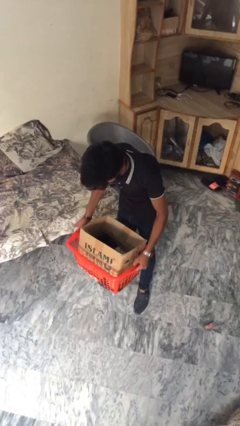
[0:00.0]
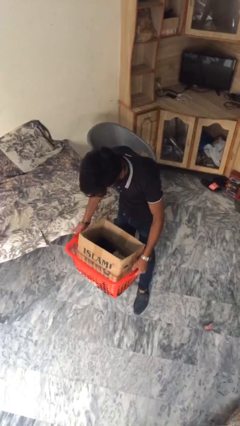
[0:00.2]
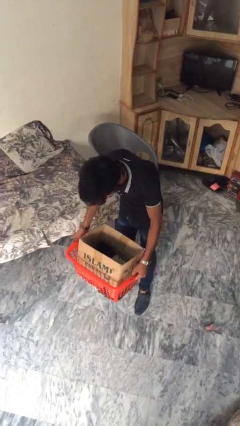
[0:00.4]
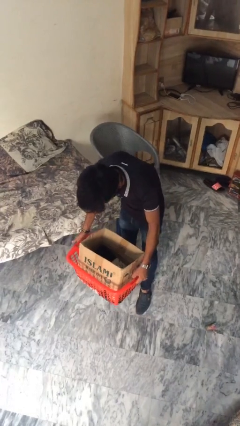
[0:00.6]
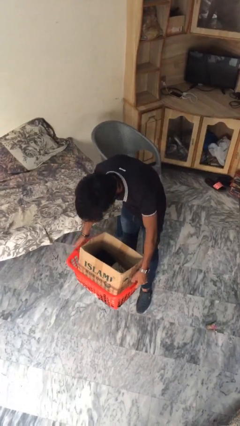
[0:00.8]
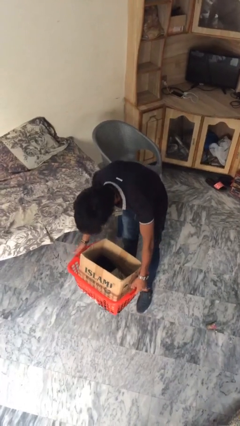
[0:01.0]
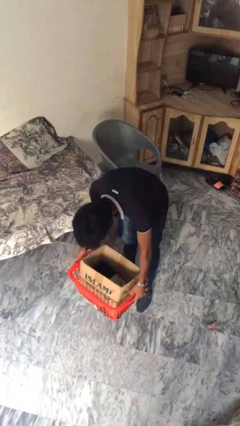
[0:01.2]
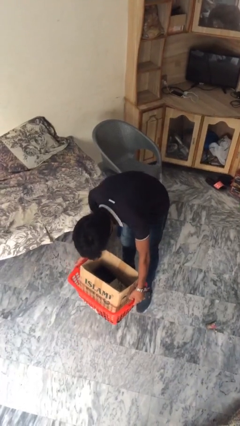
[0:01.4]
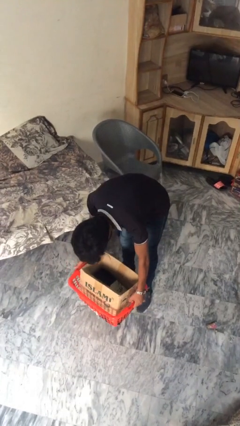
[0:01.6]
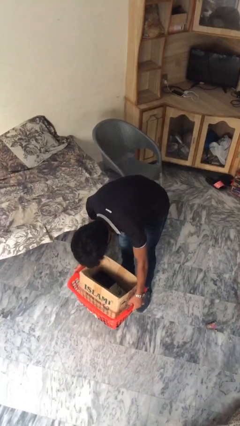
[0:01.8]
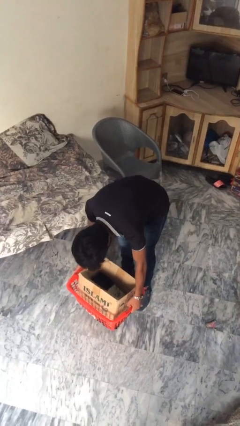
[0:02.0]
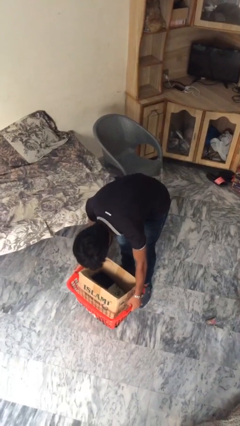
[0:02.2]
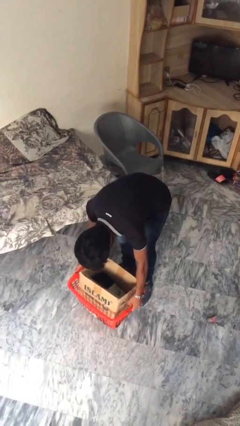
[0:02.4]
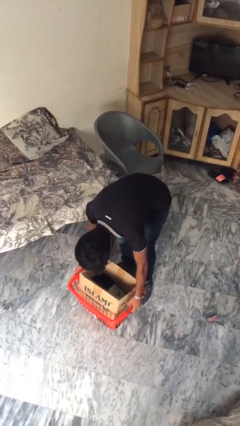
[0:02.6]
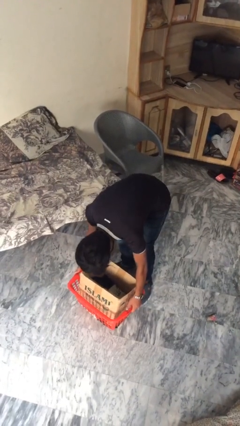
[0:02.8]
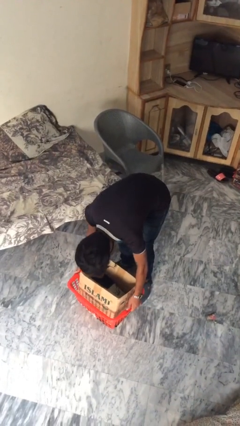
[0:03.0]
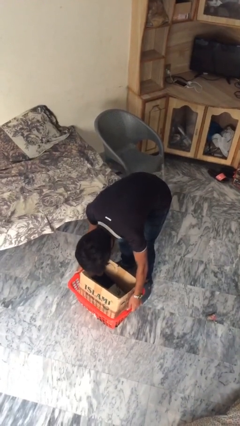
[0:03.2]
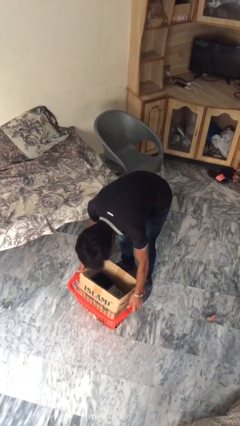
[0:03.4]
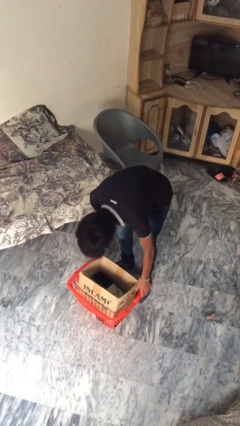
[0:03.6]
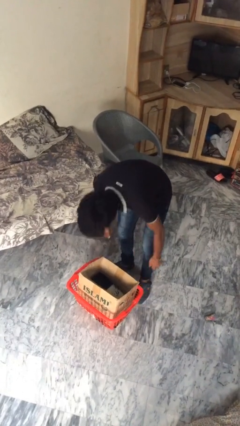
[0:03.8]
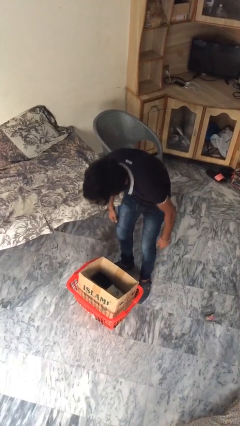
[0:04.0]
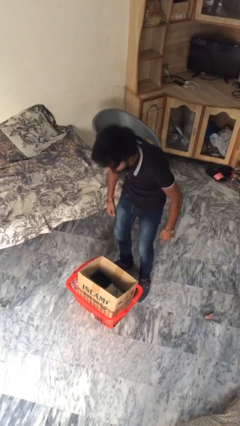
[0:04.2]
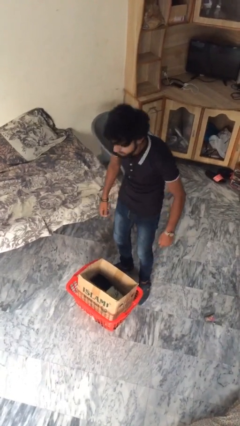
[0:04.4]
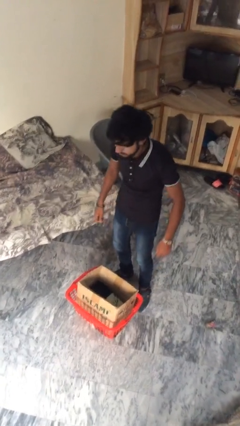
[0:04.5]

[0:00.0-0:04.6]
person puts down object on floor

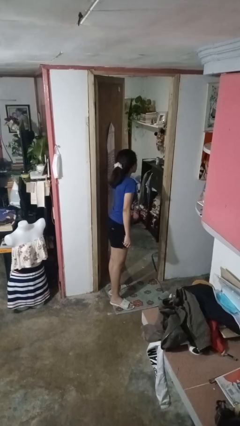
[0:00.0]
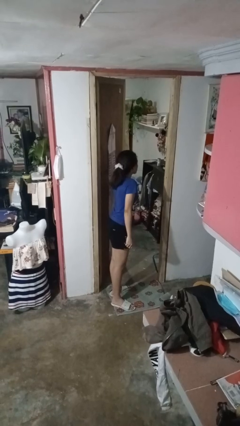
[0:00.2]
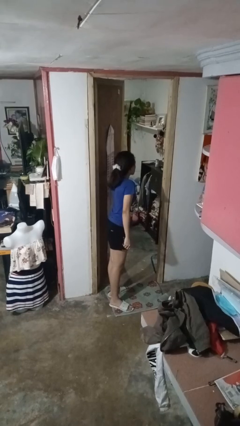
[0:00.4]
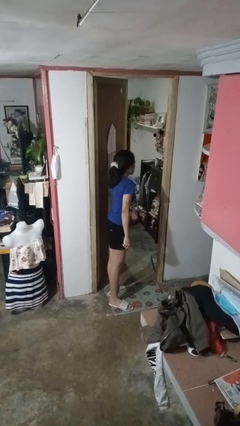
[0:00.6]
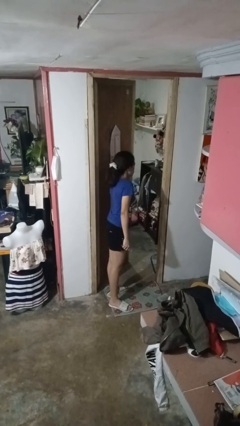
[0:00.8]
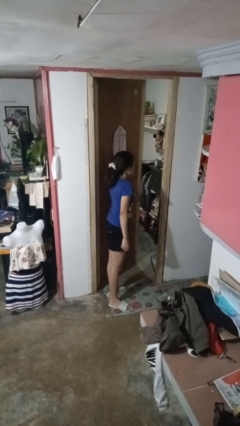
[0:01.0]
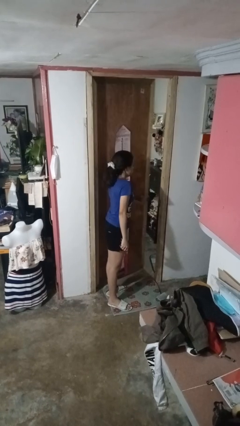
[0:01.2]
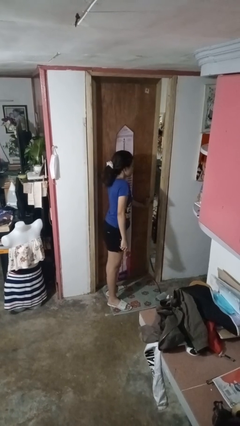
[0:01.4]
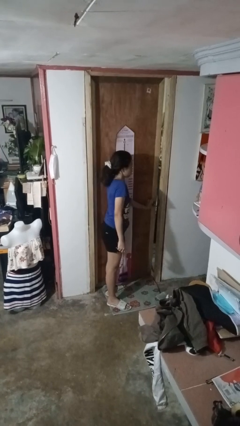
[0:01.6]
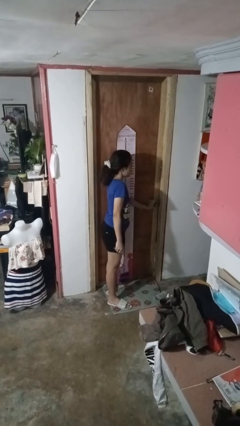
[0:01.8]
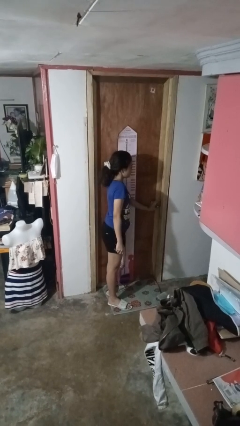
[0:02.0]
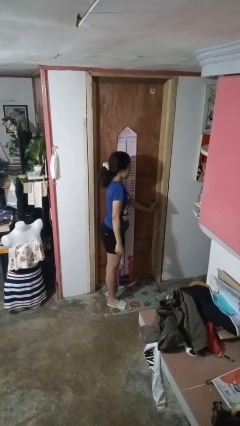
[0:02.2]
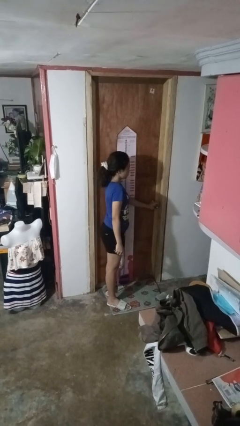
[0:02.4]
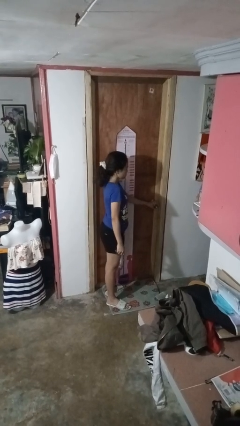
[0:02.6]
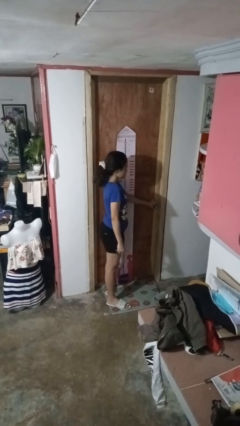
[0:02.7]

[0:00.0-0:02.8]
person closes facility door

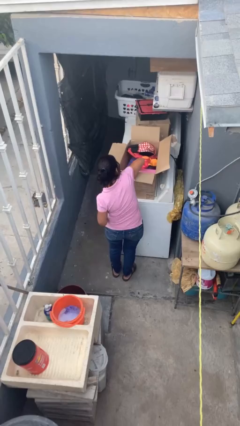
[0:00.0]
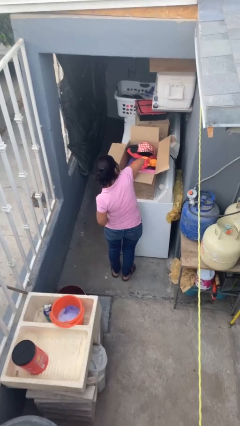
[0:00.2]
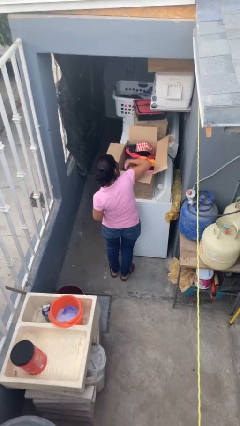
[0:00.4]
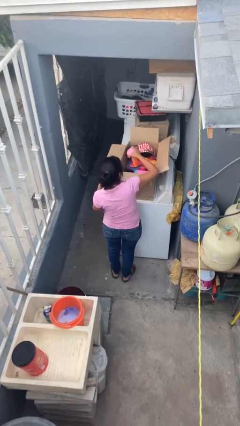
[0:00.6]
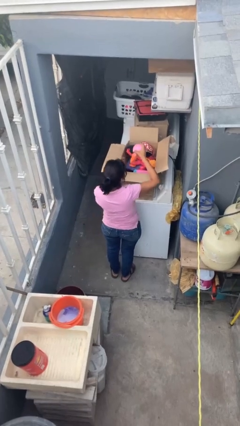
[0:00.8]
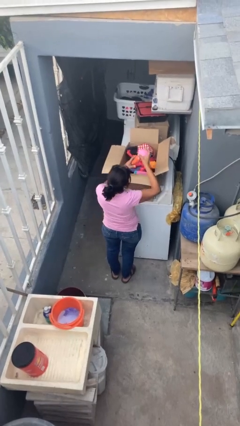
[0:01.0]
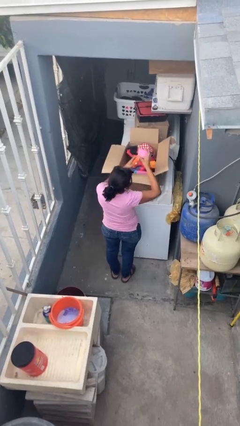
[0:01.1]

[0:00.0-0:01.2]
person takes object from box

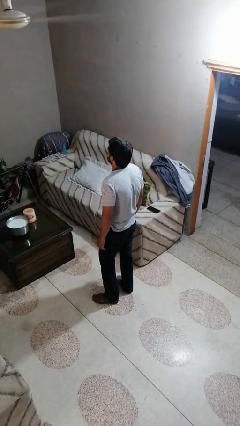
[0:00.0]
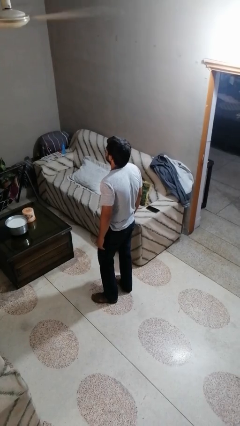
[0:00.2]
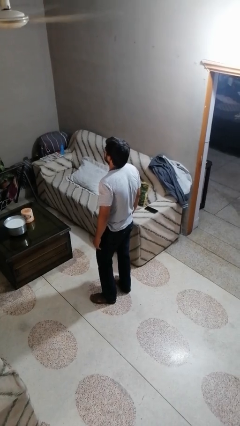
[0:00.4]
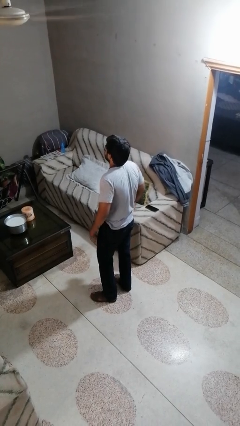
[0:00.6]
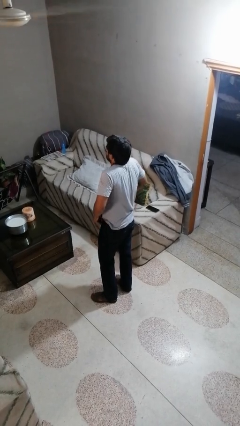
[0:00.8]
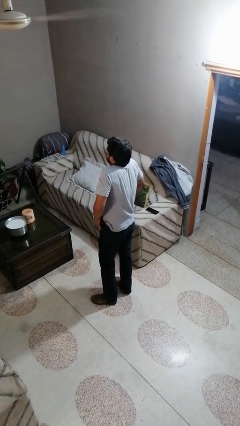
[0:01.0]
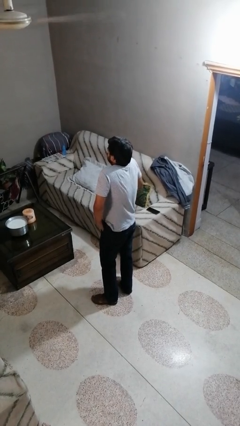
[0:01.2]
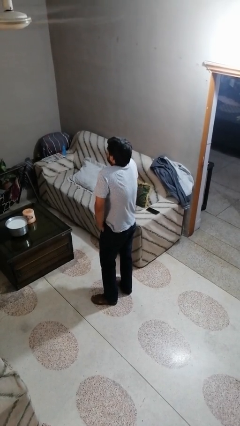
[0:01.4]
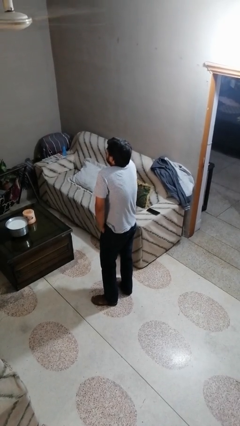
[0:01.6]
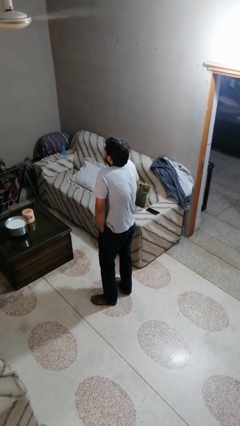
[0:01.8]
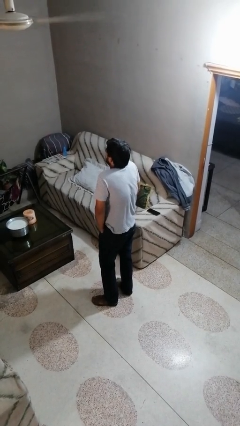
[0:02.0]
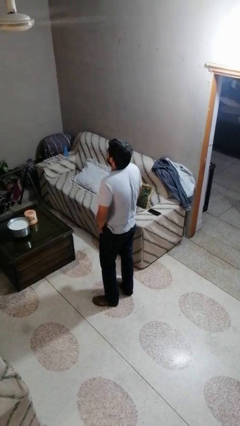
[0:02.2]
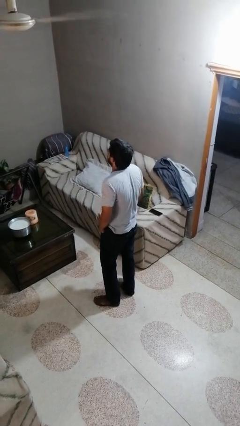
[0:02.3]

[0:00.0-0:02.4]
person puts hands in back pockets

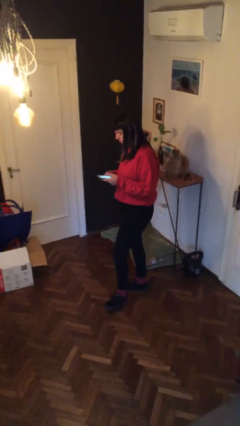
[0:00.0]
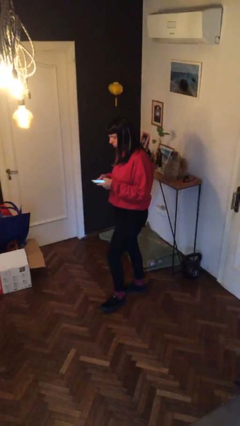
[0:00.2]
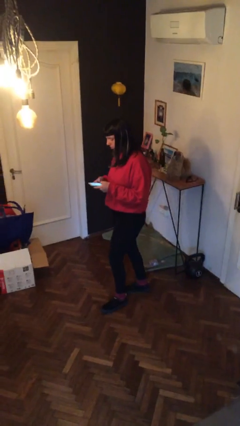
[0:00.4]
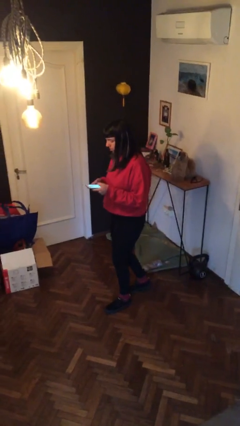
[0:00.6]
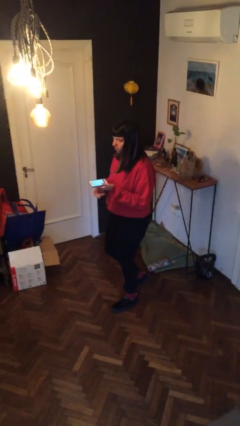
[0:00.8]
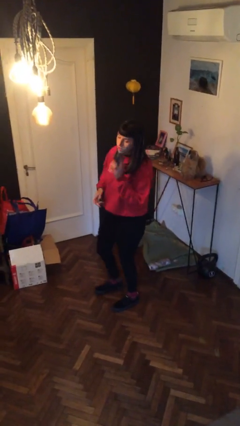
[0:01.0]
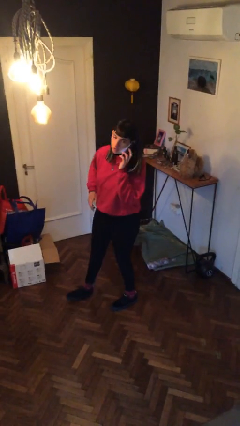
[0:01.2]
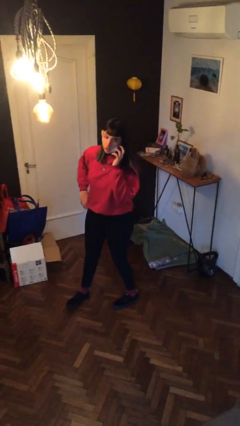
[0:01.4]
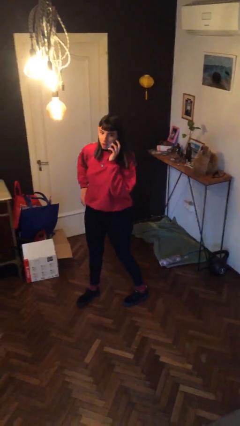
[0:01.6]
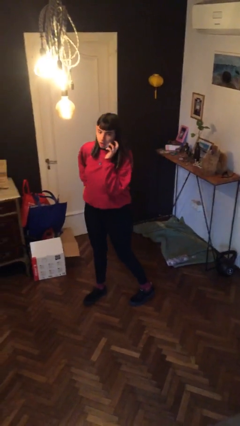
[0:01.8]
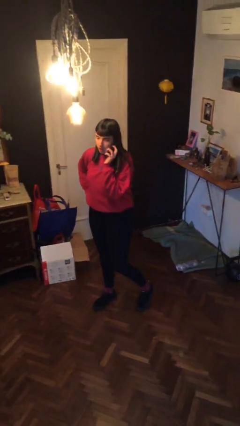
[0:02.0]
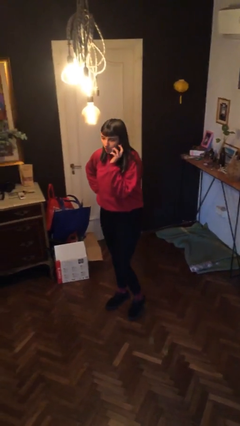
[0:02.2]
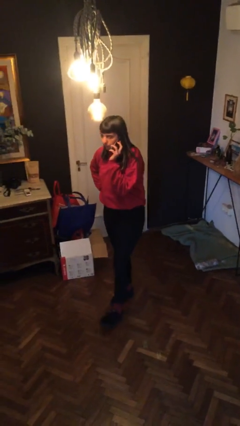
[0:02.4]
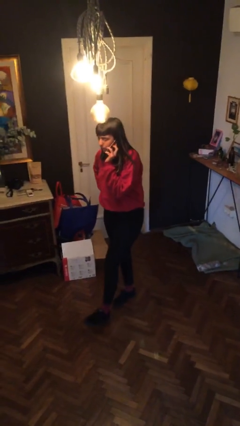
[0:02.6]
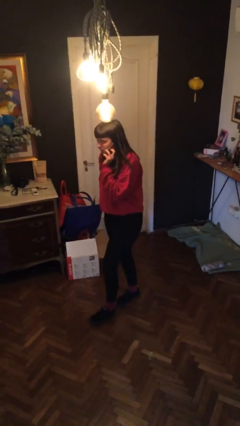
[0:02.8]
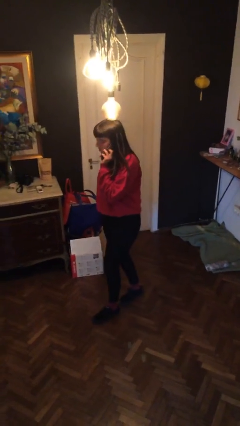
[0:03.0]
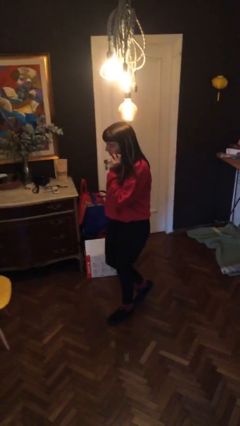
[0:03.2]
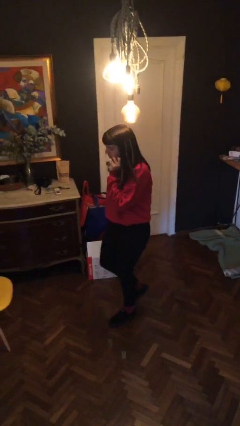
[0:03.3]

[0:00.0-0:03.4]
person talks on phone

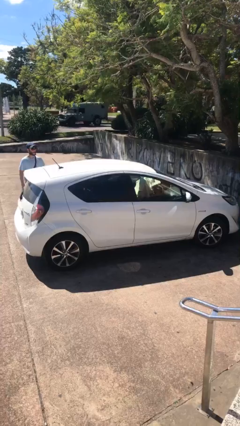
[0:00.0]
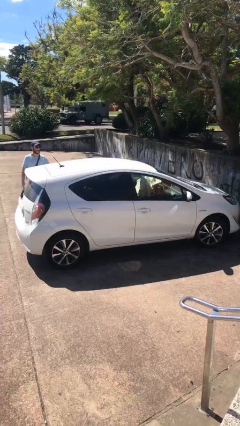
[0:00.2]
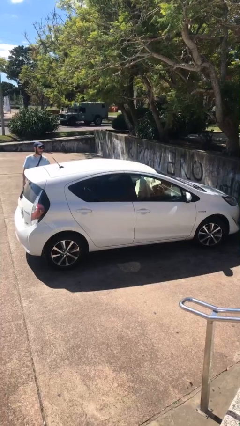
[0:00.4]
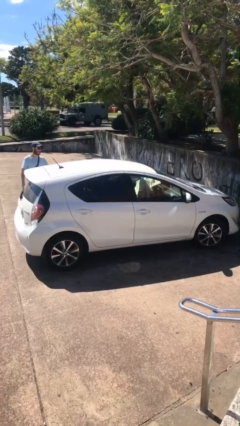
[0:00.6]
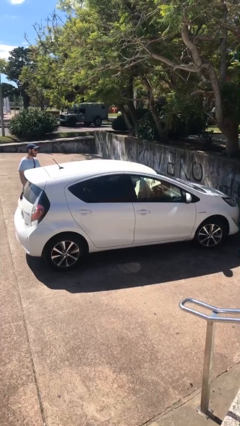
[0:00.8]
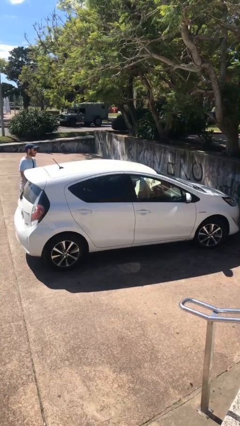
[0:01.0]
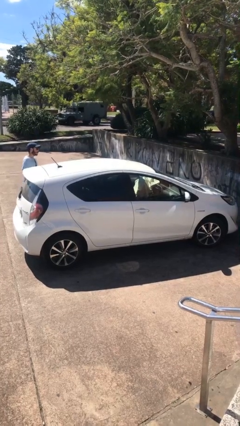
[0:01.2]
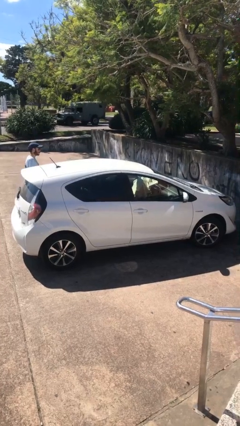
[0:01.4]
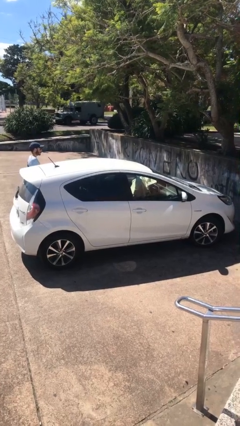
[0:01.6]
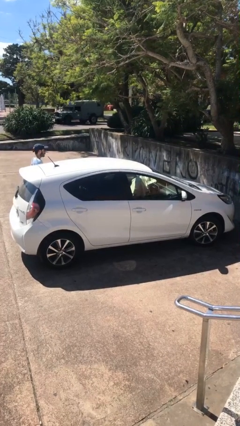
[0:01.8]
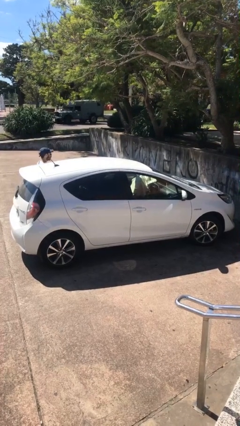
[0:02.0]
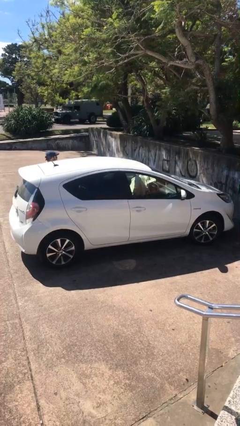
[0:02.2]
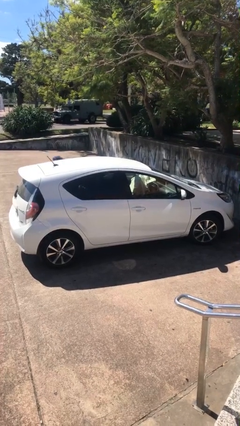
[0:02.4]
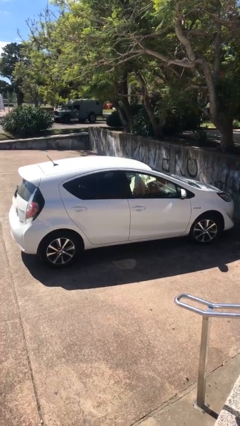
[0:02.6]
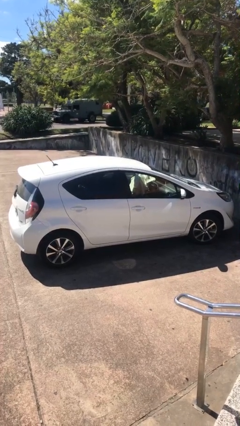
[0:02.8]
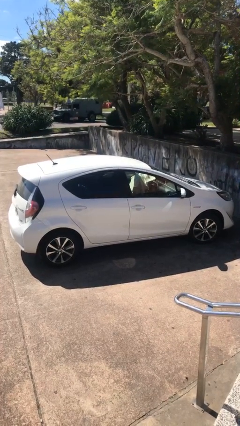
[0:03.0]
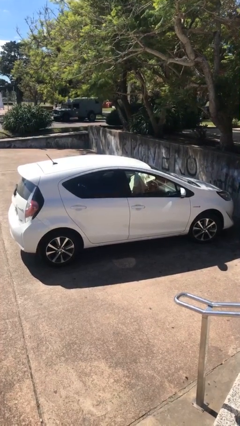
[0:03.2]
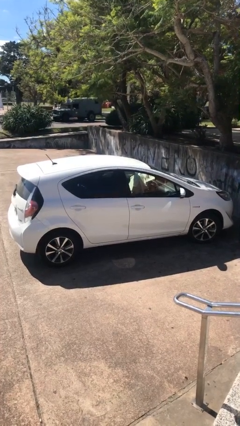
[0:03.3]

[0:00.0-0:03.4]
car picks up person
